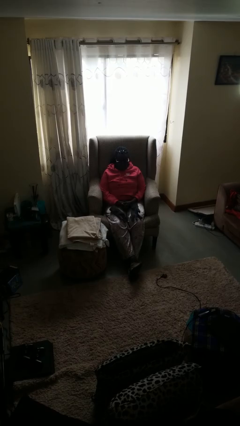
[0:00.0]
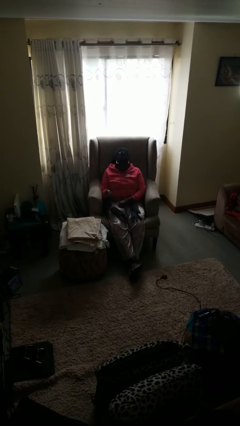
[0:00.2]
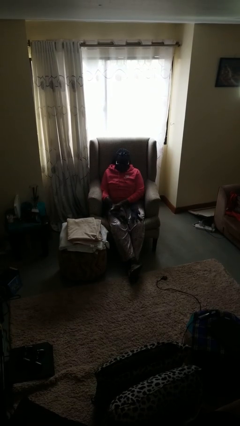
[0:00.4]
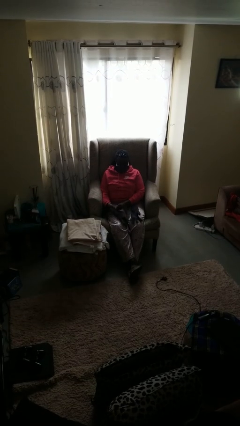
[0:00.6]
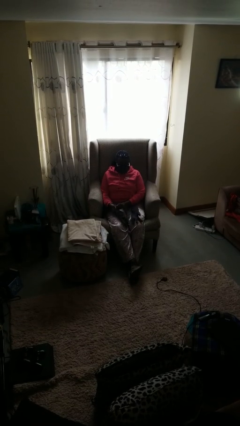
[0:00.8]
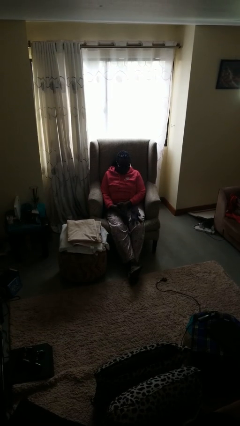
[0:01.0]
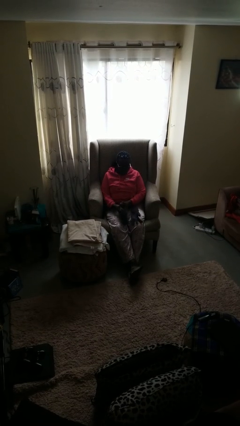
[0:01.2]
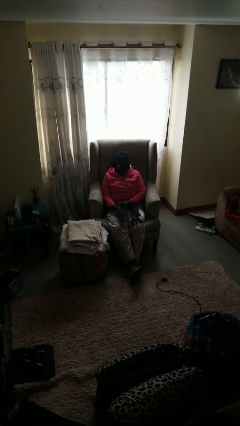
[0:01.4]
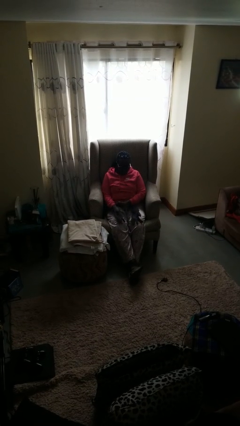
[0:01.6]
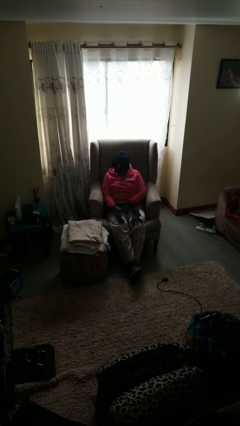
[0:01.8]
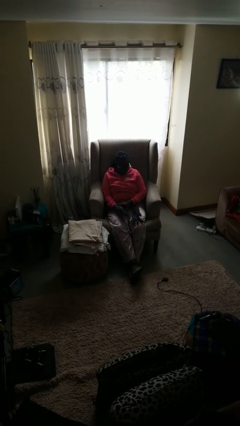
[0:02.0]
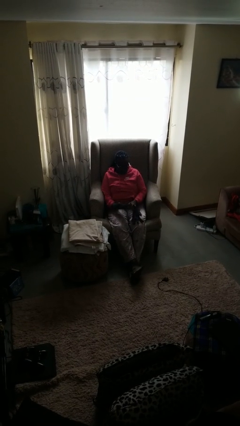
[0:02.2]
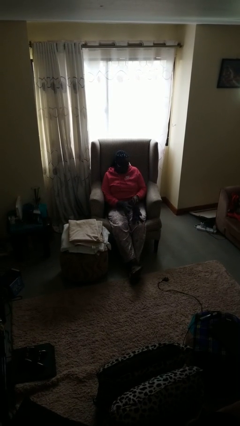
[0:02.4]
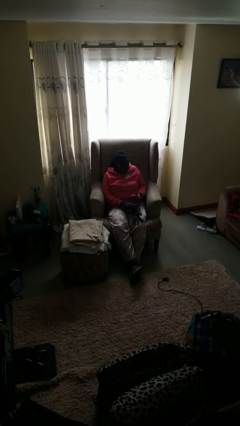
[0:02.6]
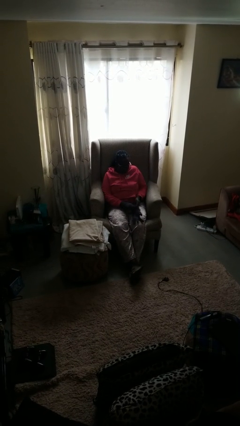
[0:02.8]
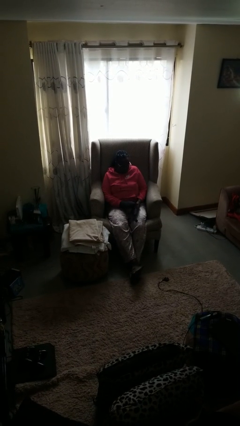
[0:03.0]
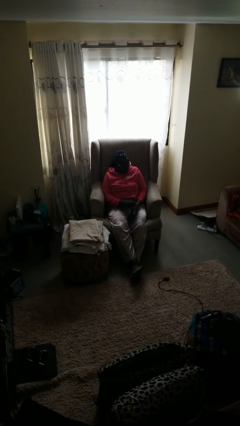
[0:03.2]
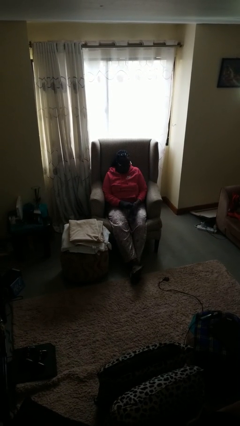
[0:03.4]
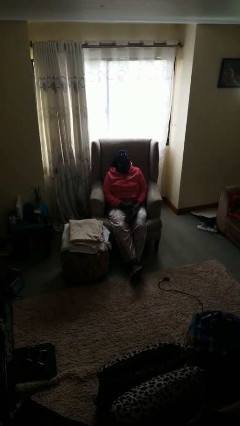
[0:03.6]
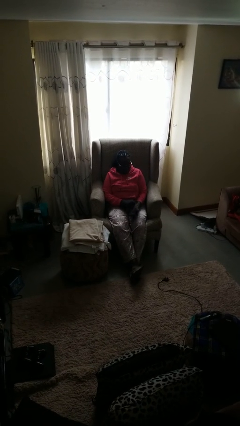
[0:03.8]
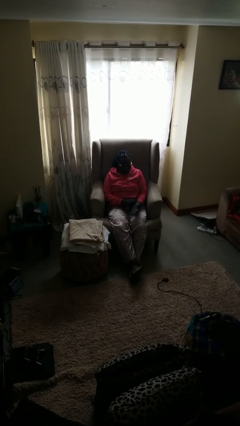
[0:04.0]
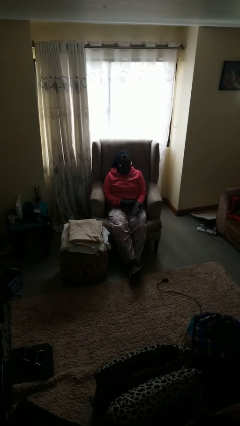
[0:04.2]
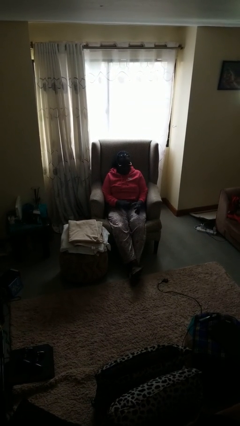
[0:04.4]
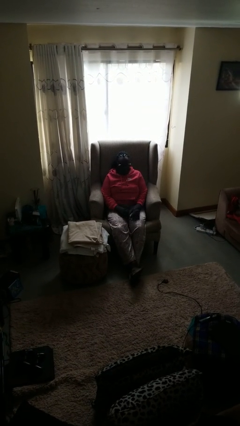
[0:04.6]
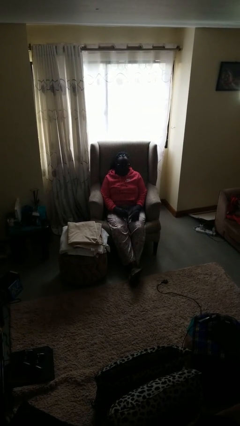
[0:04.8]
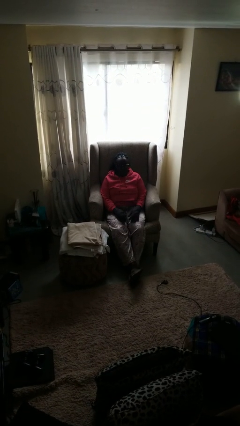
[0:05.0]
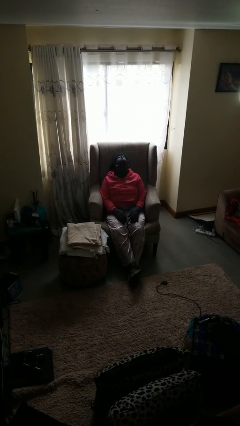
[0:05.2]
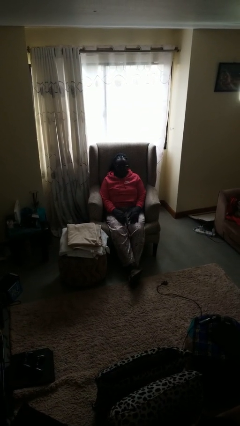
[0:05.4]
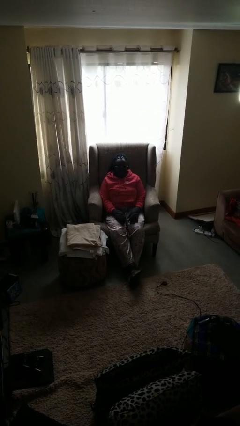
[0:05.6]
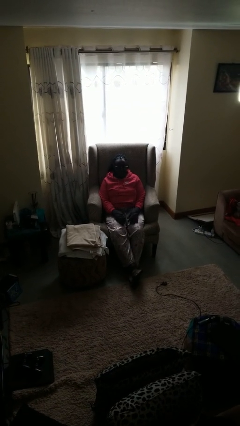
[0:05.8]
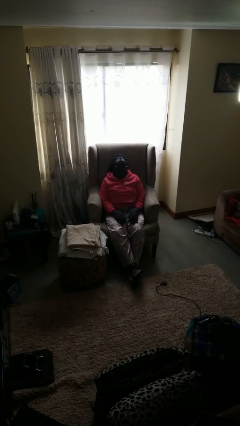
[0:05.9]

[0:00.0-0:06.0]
person puts on gloves

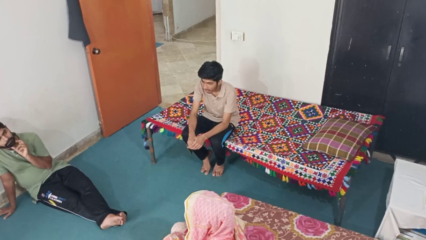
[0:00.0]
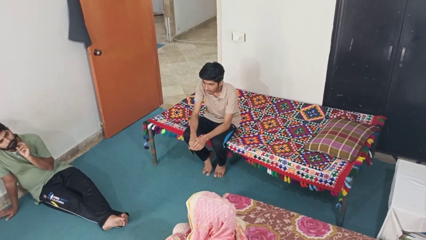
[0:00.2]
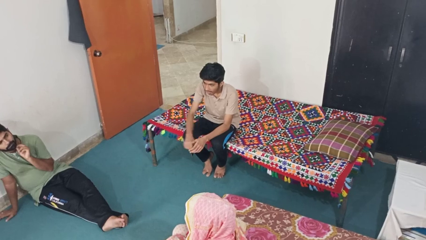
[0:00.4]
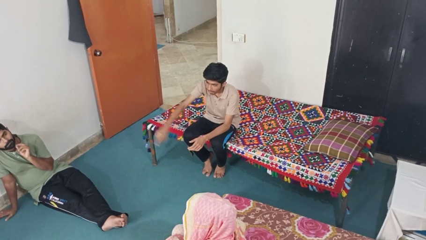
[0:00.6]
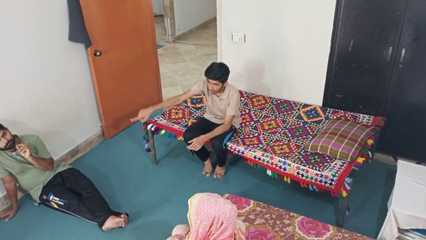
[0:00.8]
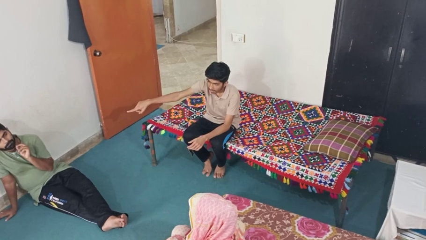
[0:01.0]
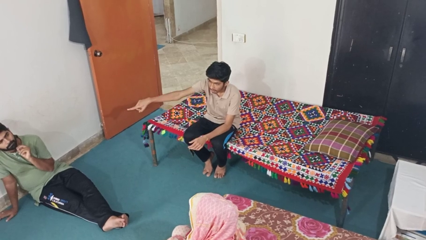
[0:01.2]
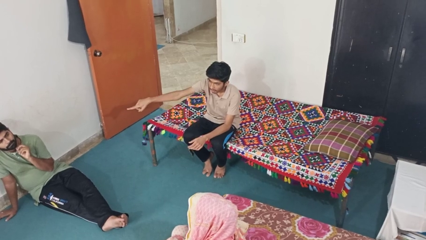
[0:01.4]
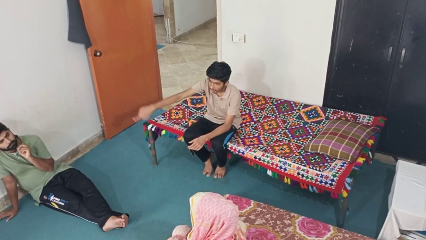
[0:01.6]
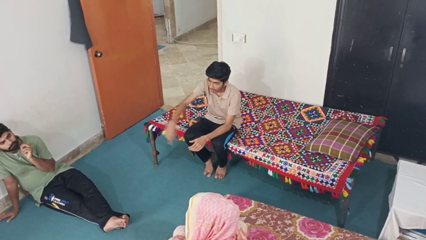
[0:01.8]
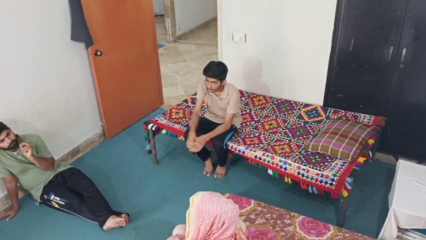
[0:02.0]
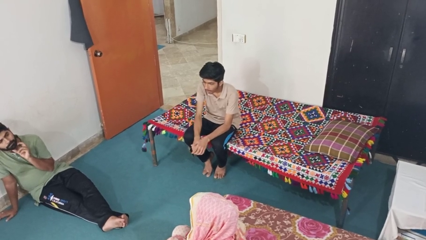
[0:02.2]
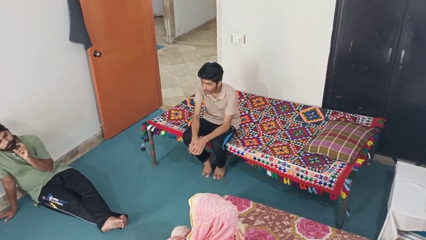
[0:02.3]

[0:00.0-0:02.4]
person points at person

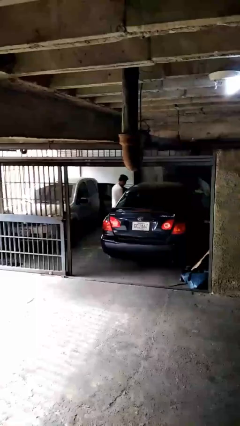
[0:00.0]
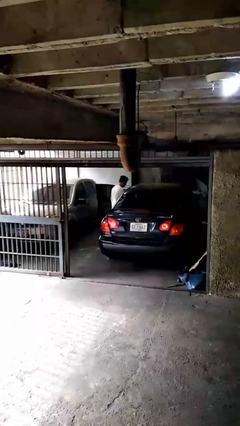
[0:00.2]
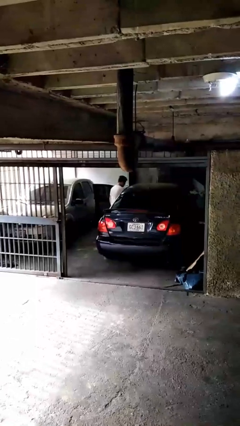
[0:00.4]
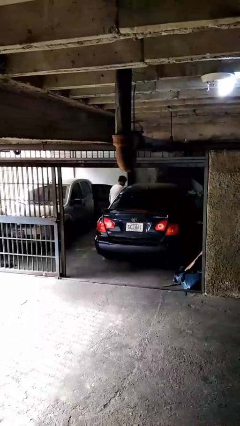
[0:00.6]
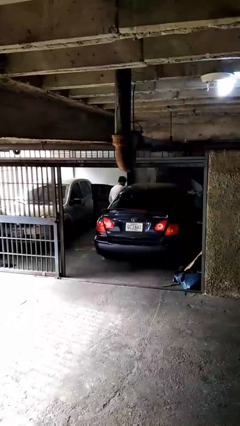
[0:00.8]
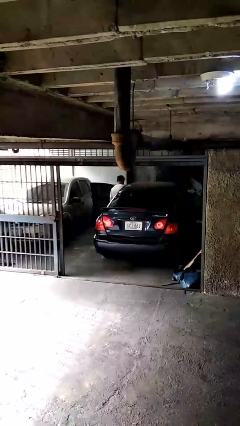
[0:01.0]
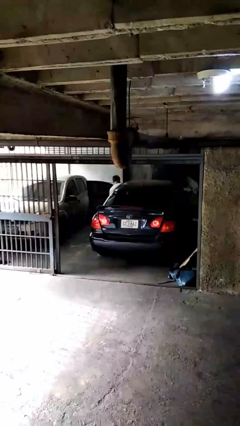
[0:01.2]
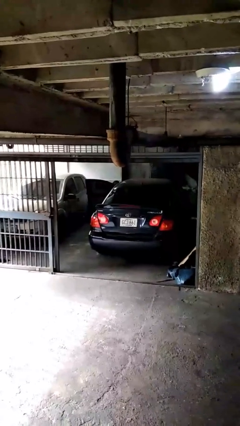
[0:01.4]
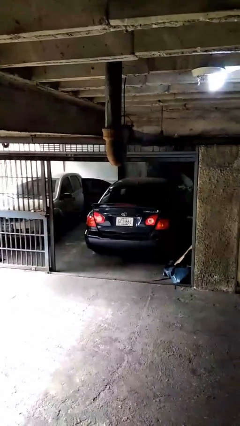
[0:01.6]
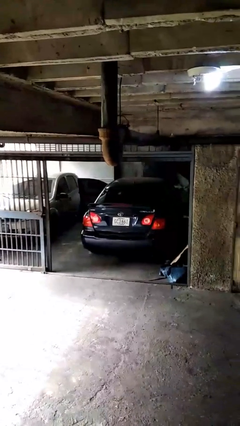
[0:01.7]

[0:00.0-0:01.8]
person enters car

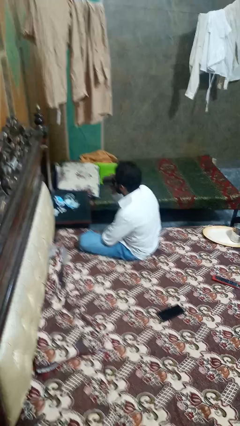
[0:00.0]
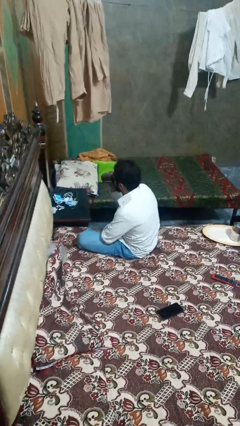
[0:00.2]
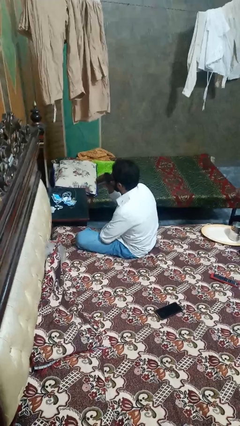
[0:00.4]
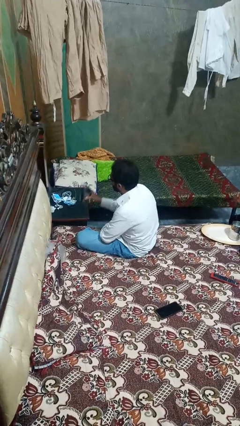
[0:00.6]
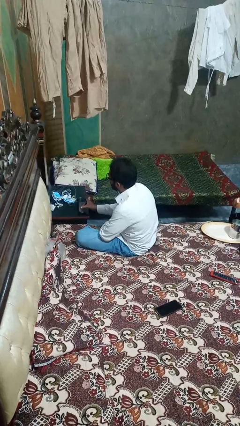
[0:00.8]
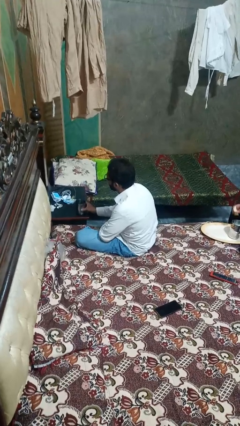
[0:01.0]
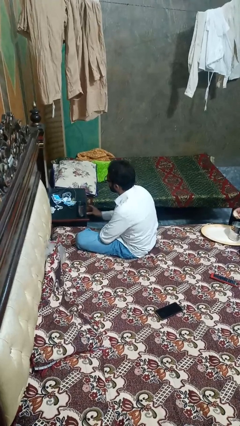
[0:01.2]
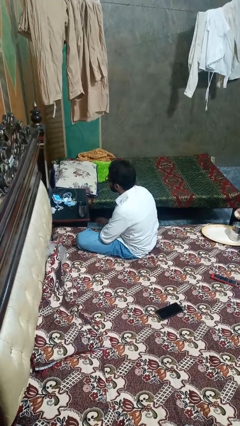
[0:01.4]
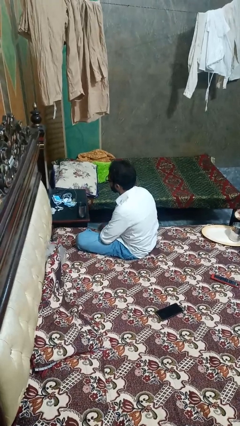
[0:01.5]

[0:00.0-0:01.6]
person puts down object on table

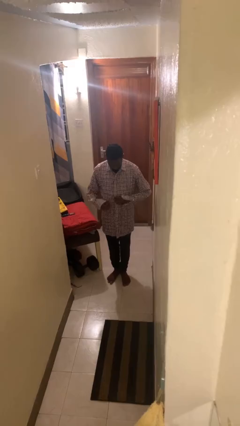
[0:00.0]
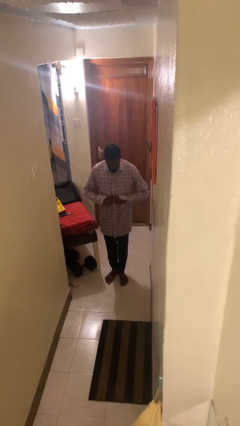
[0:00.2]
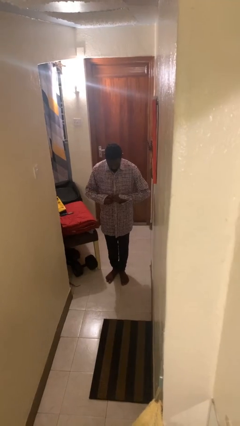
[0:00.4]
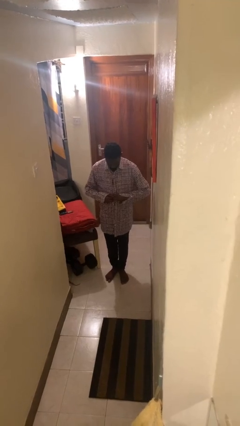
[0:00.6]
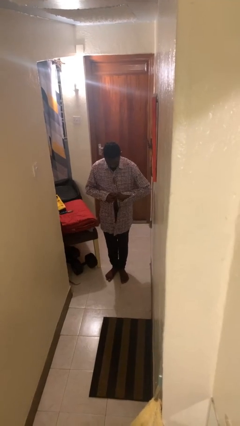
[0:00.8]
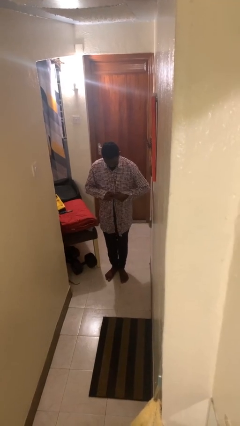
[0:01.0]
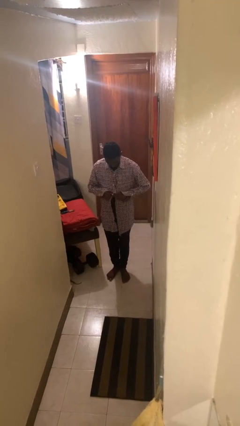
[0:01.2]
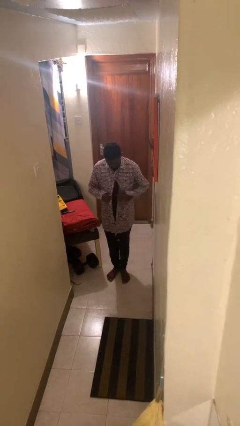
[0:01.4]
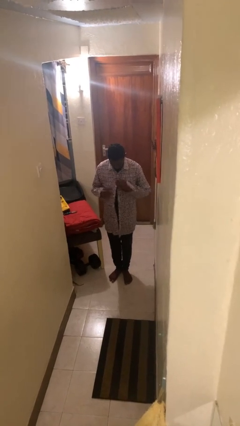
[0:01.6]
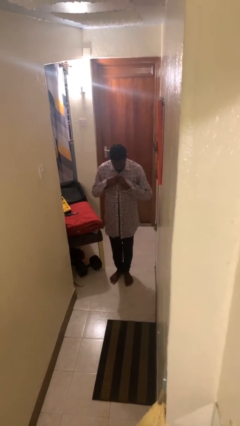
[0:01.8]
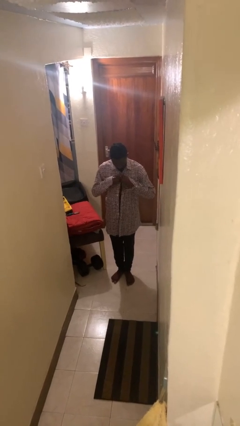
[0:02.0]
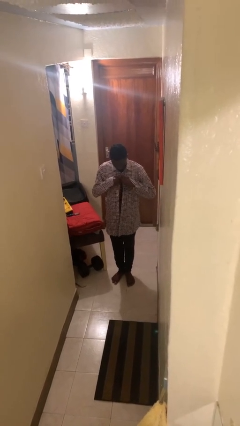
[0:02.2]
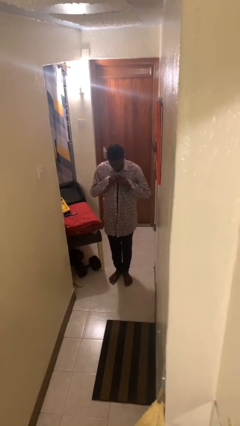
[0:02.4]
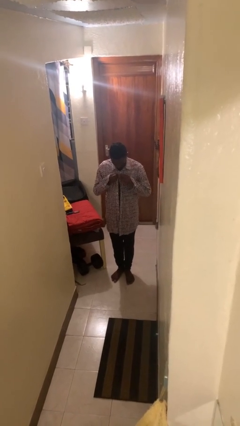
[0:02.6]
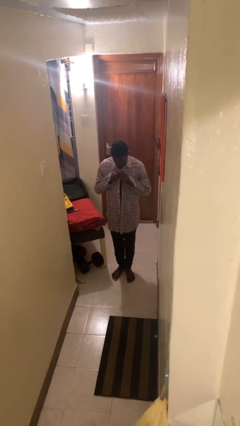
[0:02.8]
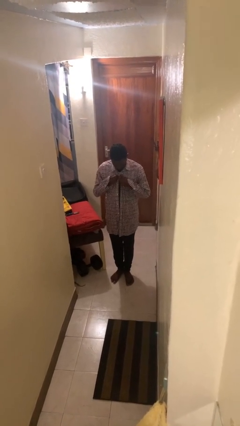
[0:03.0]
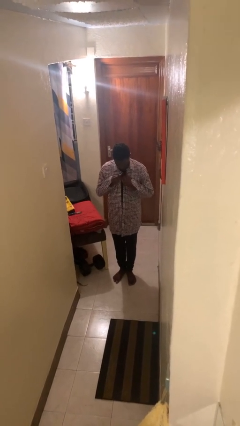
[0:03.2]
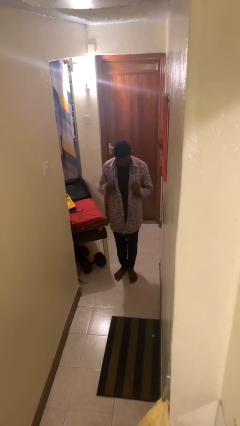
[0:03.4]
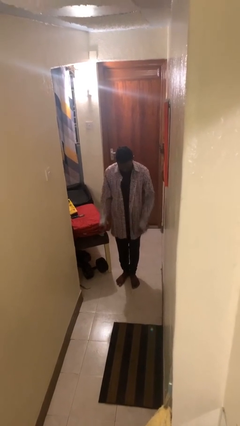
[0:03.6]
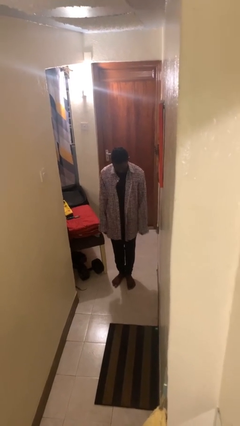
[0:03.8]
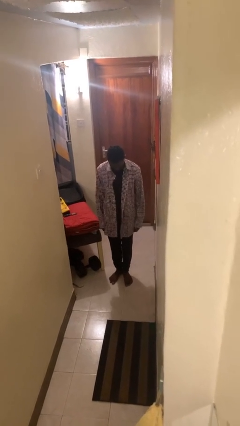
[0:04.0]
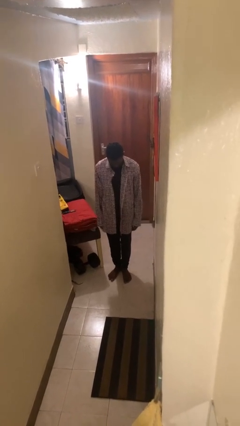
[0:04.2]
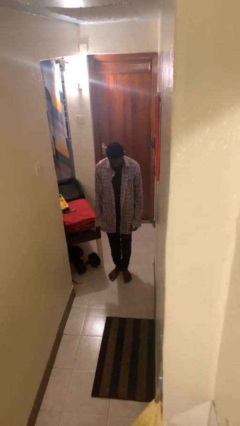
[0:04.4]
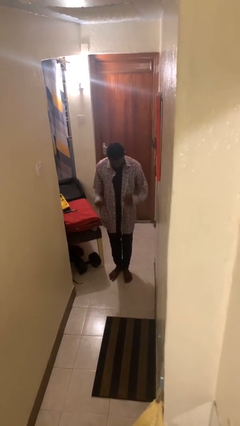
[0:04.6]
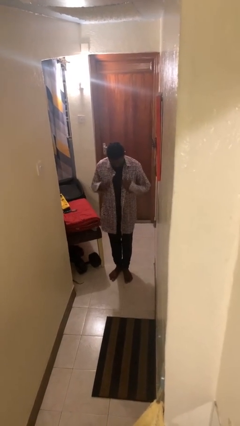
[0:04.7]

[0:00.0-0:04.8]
person unbuttons shirt

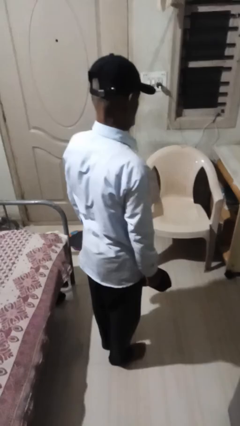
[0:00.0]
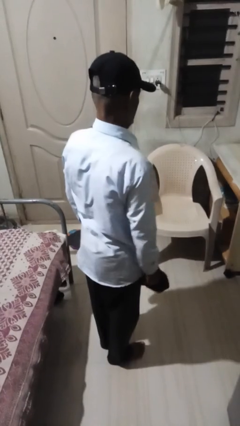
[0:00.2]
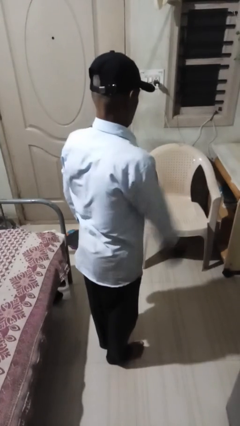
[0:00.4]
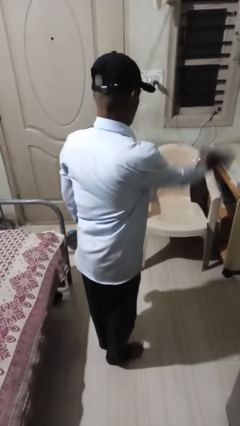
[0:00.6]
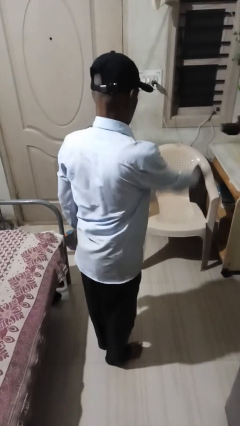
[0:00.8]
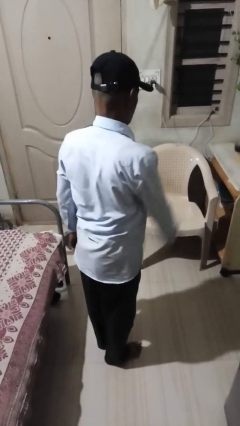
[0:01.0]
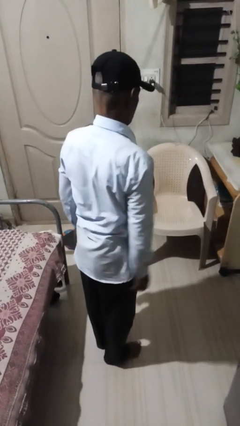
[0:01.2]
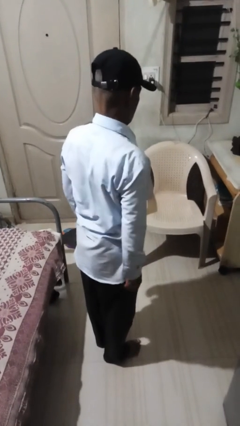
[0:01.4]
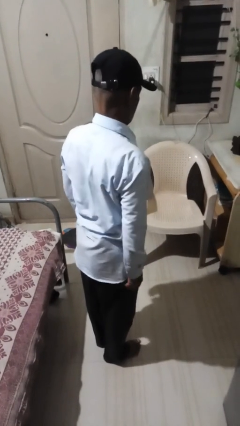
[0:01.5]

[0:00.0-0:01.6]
person throws object on table
